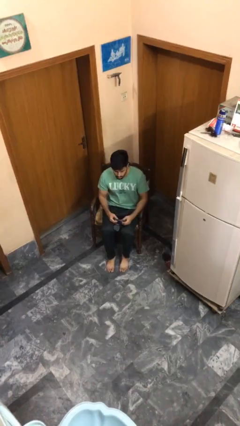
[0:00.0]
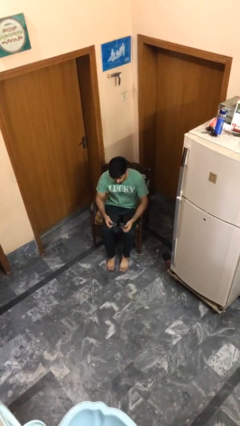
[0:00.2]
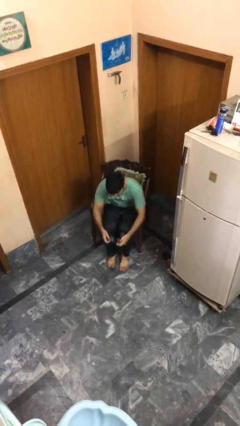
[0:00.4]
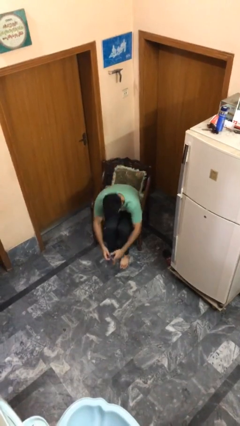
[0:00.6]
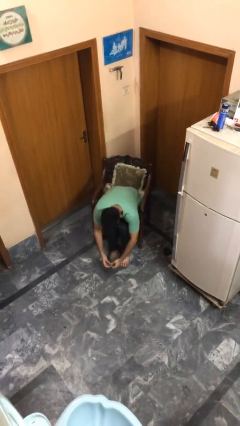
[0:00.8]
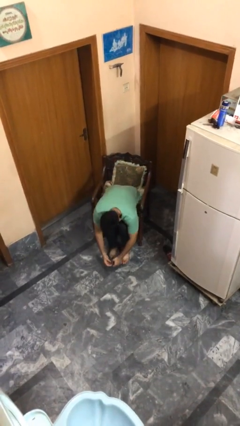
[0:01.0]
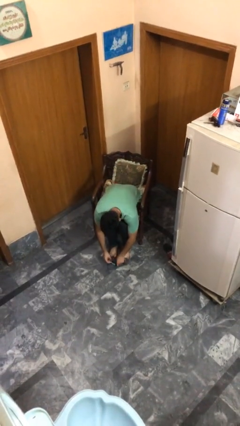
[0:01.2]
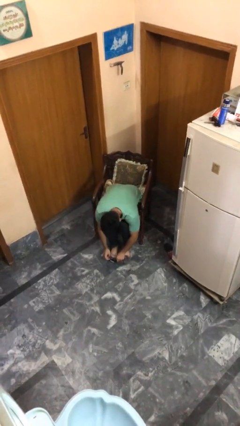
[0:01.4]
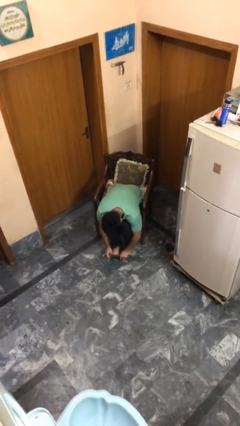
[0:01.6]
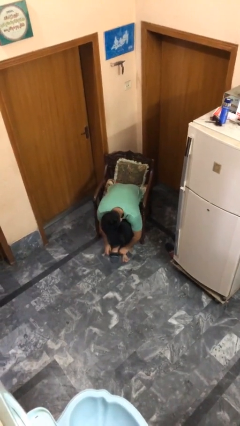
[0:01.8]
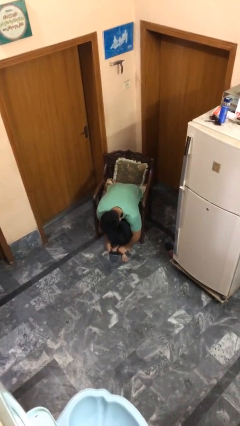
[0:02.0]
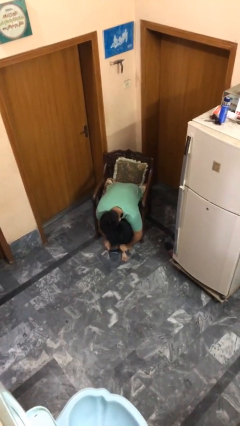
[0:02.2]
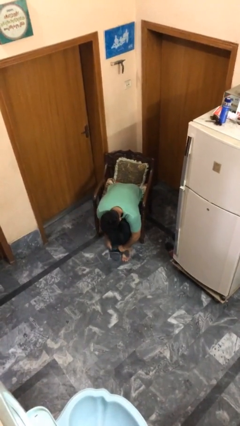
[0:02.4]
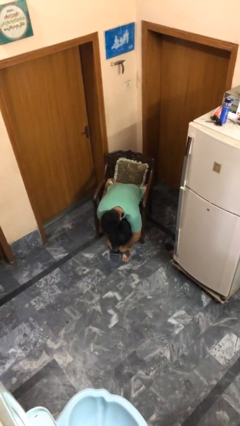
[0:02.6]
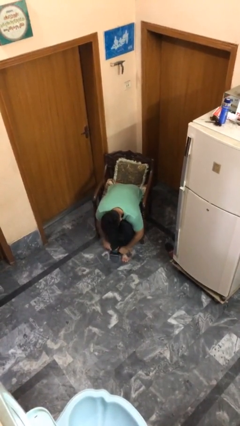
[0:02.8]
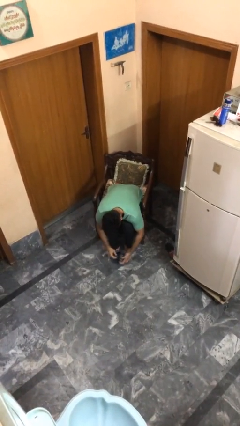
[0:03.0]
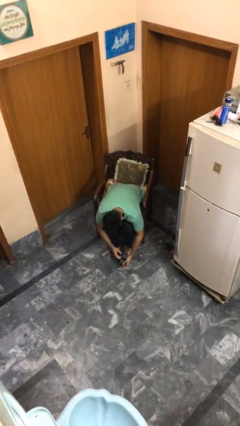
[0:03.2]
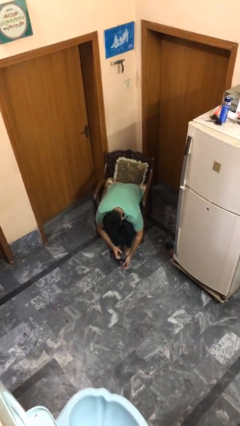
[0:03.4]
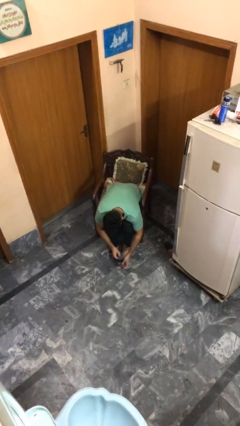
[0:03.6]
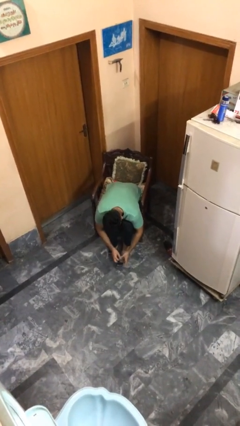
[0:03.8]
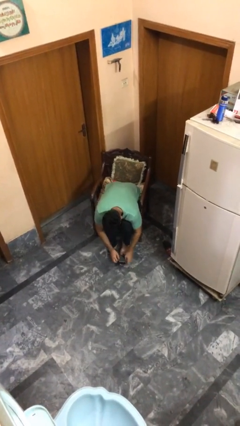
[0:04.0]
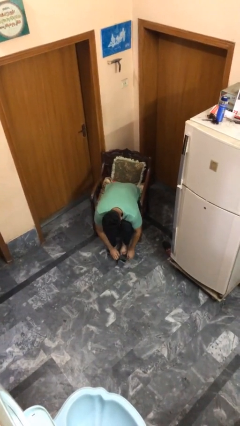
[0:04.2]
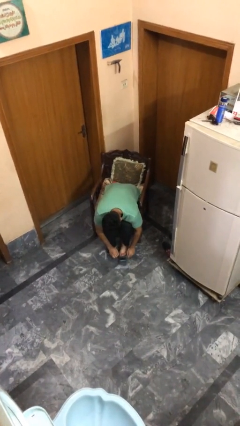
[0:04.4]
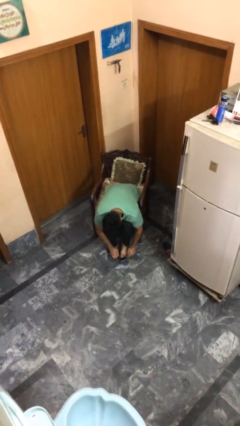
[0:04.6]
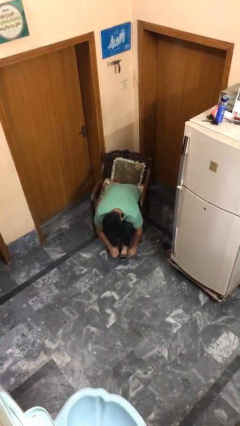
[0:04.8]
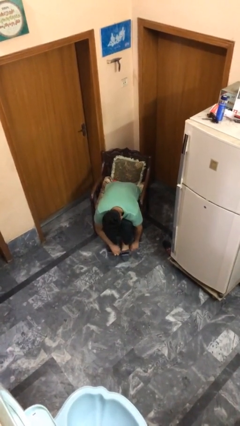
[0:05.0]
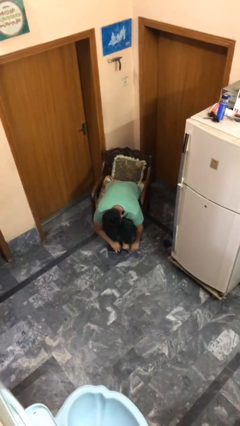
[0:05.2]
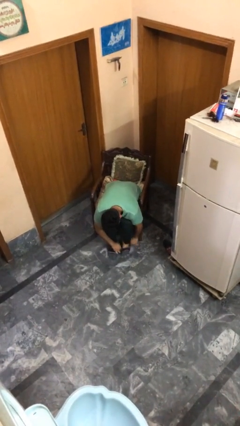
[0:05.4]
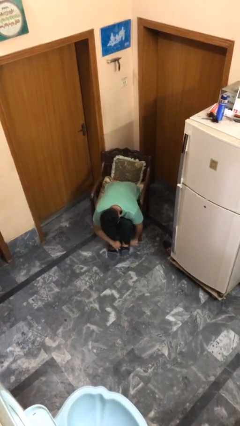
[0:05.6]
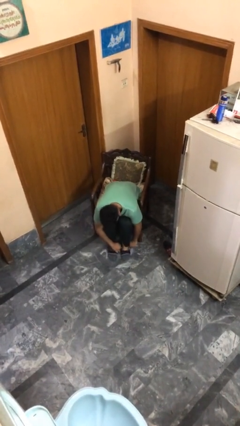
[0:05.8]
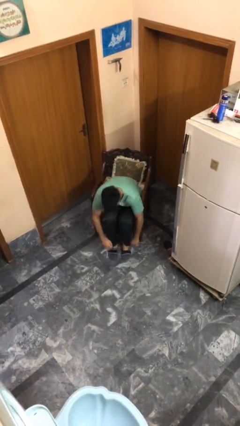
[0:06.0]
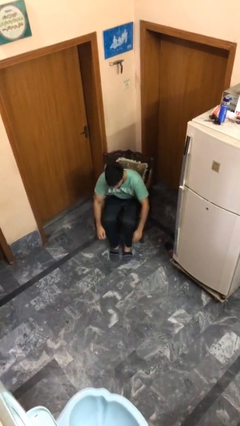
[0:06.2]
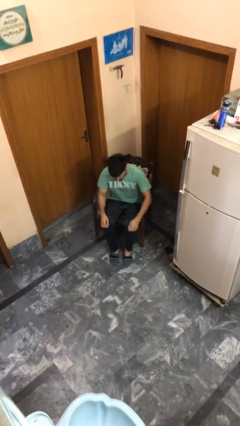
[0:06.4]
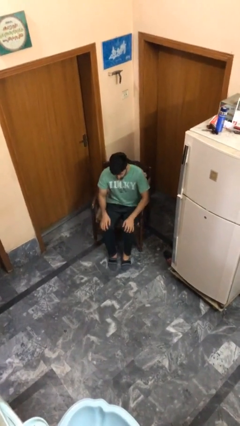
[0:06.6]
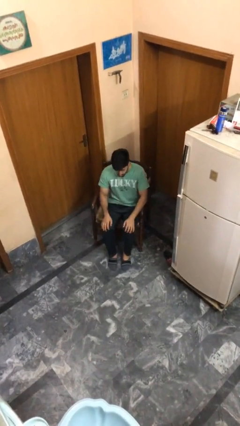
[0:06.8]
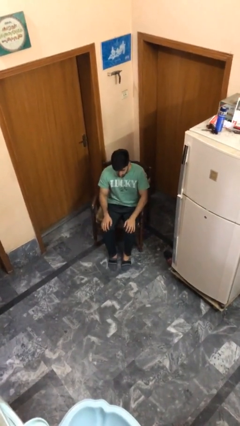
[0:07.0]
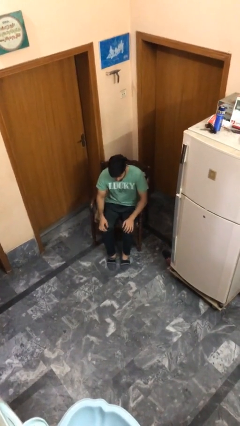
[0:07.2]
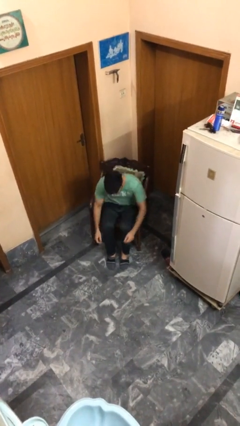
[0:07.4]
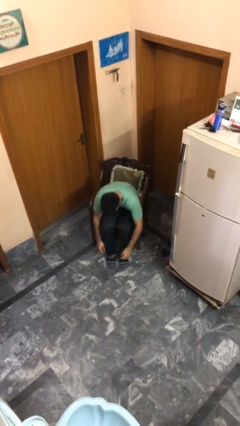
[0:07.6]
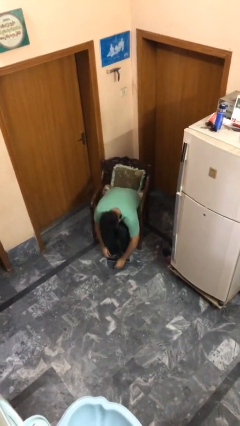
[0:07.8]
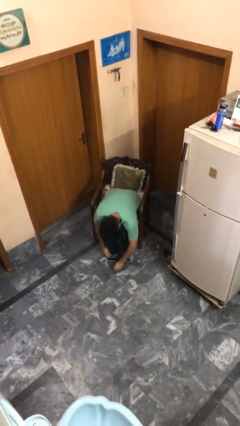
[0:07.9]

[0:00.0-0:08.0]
person puts on socks

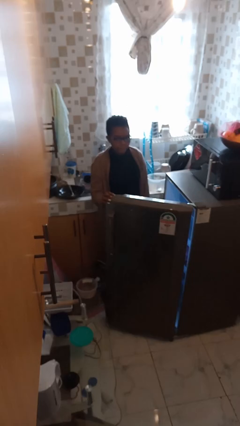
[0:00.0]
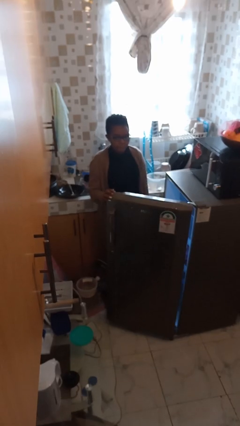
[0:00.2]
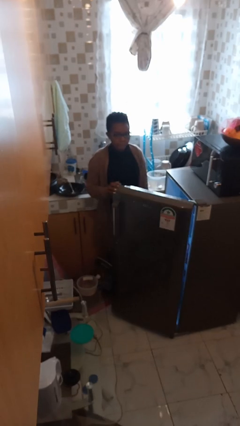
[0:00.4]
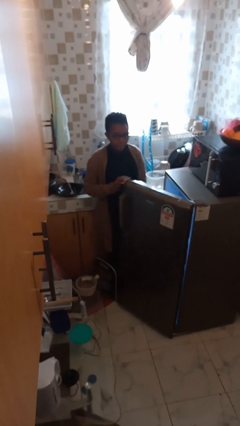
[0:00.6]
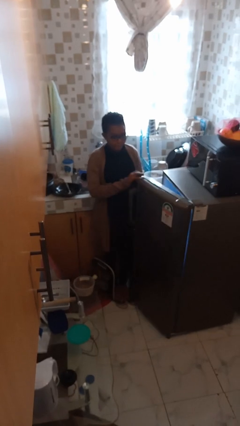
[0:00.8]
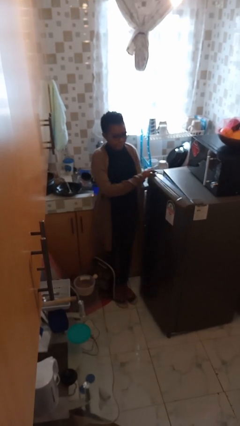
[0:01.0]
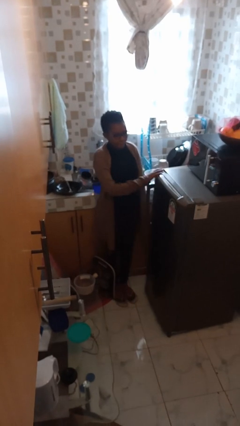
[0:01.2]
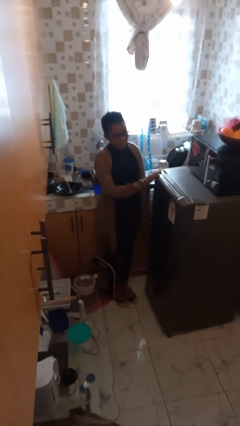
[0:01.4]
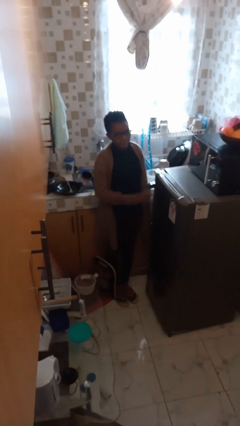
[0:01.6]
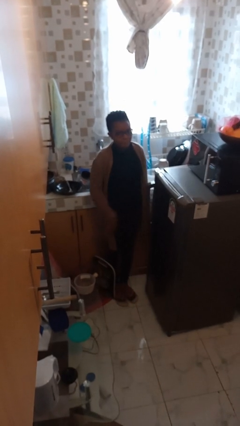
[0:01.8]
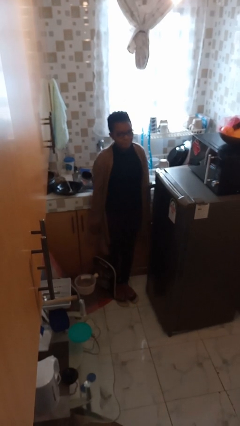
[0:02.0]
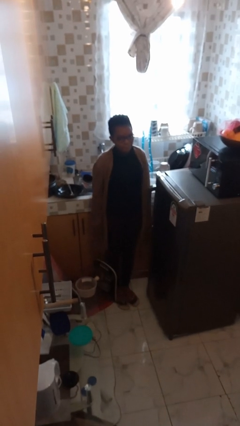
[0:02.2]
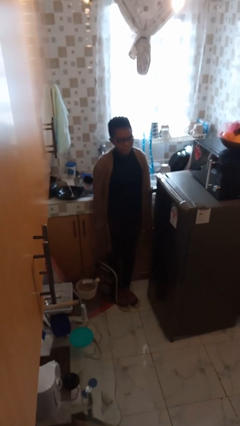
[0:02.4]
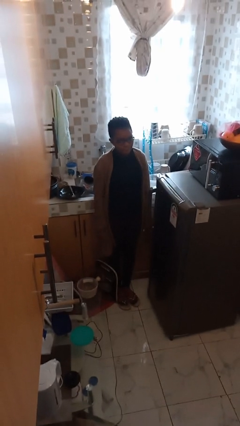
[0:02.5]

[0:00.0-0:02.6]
person closes refrigerator

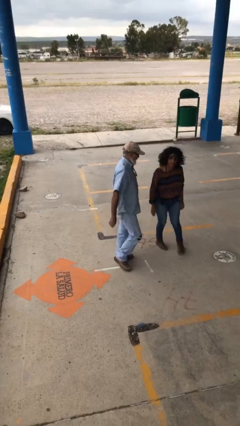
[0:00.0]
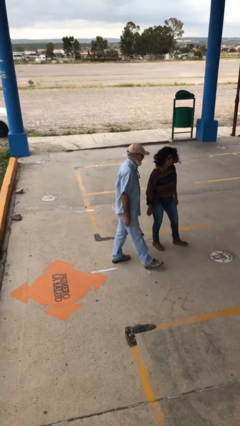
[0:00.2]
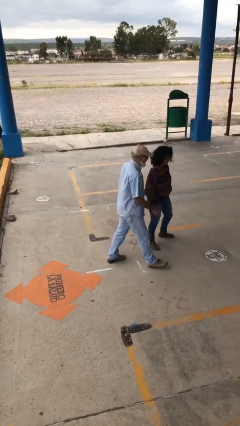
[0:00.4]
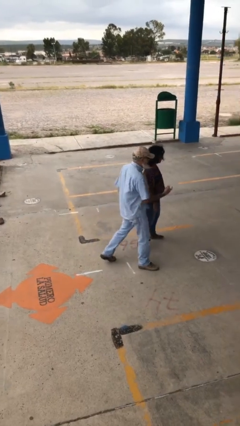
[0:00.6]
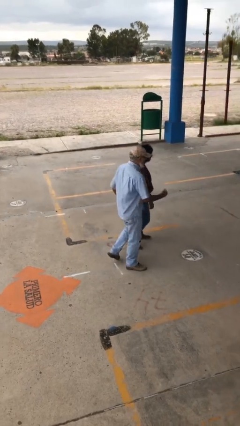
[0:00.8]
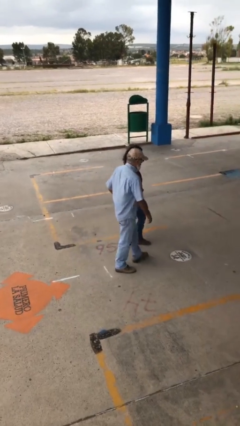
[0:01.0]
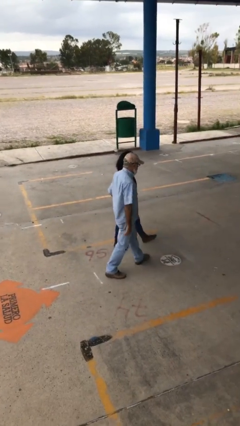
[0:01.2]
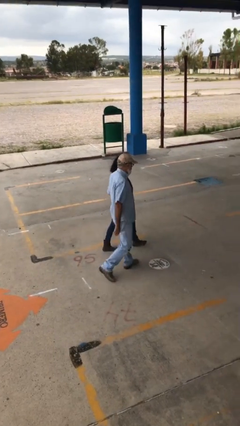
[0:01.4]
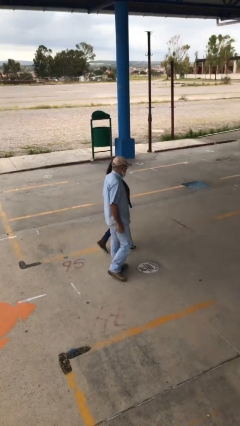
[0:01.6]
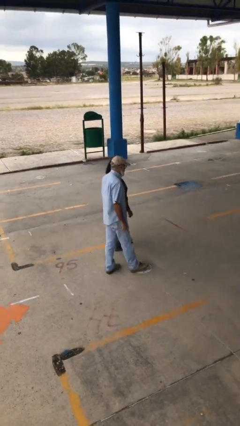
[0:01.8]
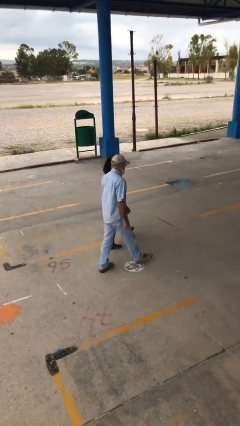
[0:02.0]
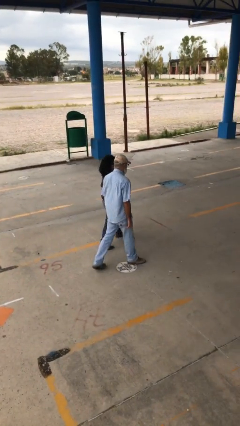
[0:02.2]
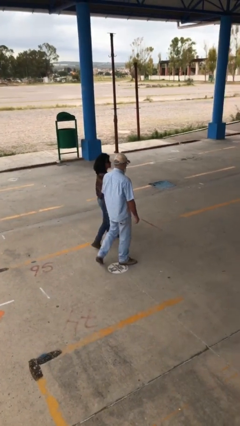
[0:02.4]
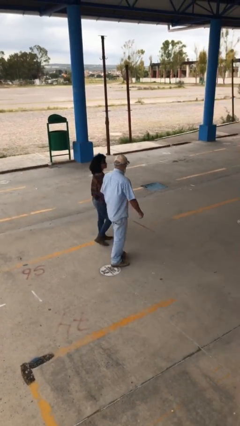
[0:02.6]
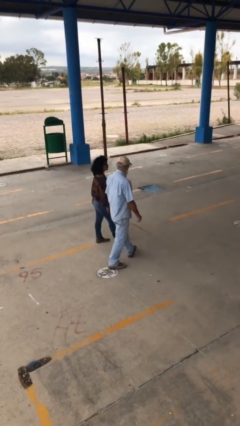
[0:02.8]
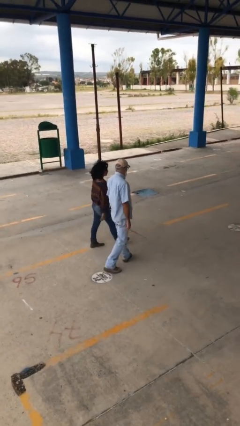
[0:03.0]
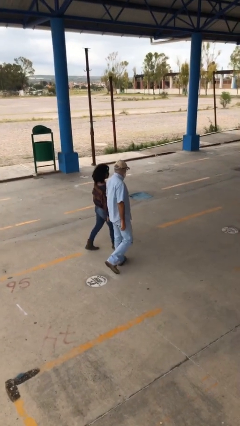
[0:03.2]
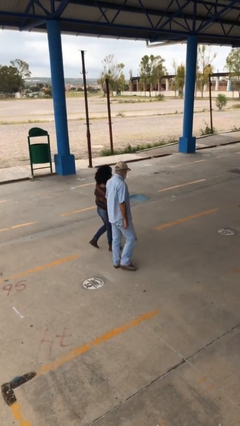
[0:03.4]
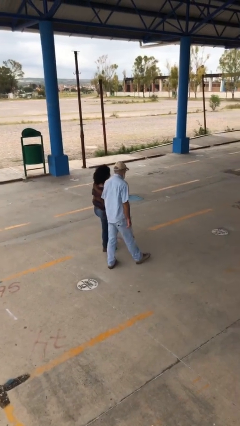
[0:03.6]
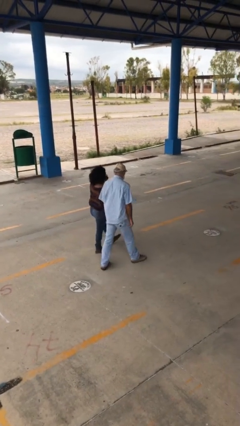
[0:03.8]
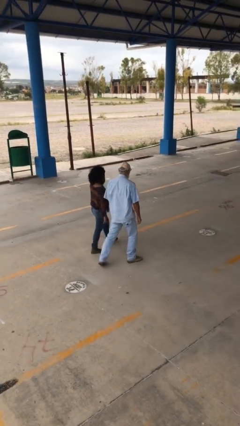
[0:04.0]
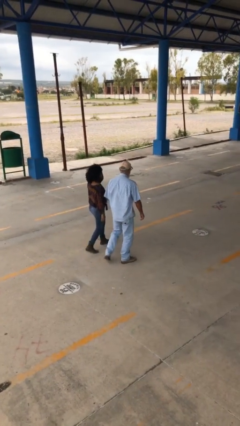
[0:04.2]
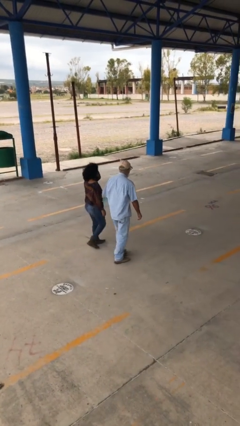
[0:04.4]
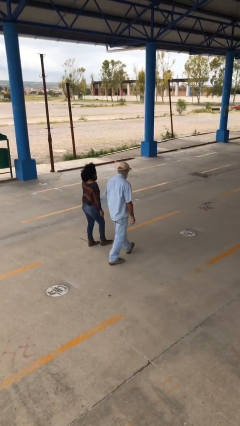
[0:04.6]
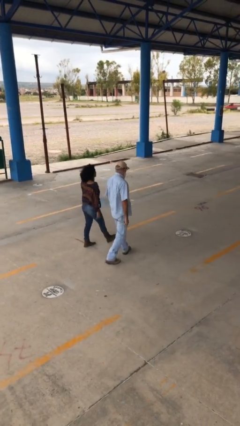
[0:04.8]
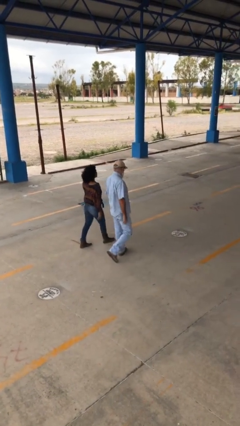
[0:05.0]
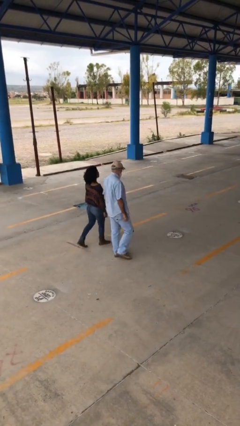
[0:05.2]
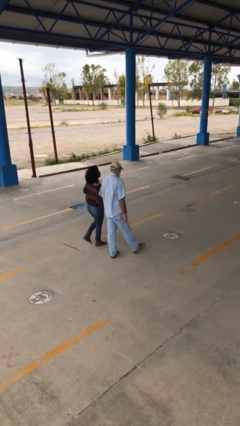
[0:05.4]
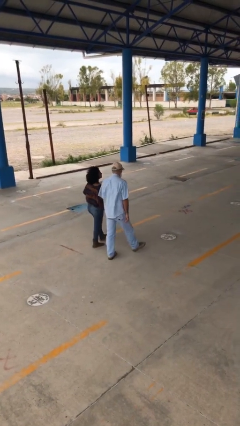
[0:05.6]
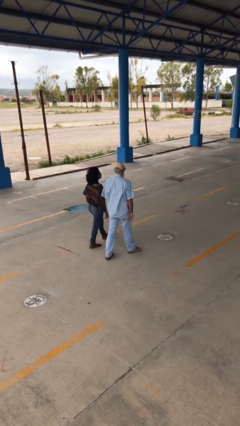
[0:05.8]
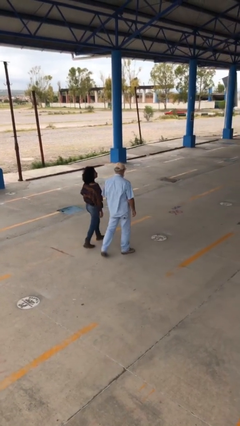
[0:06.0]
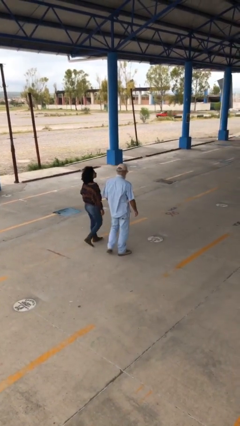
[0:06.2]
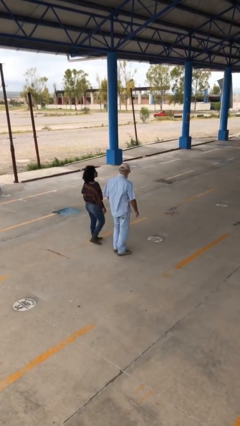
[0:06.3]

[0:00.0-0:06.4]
person talks to person

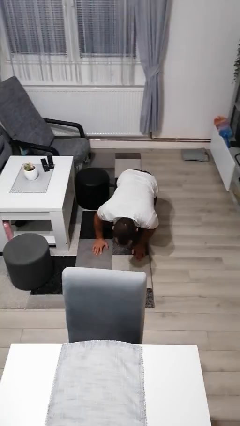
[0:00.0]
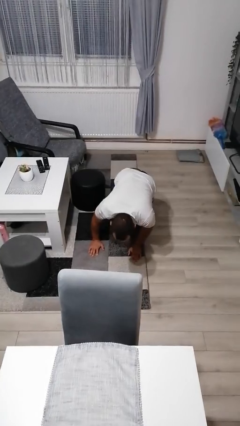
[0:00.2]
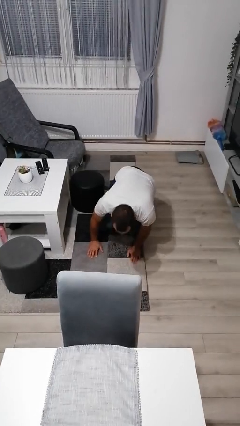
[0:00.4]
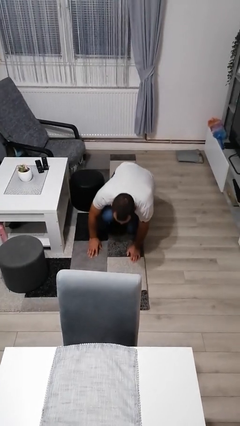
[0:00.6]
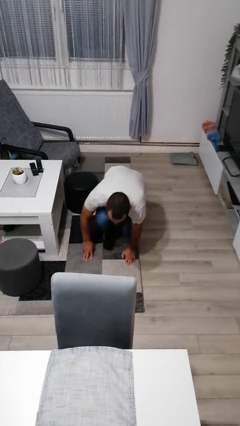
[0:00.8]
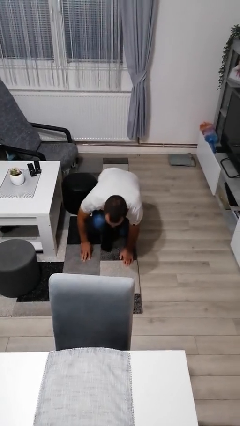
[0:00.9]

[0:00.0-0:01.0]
person lies down on floor
